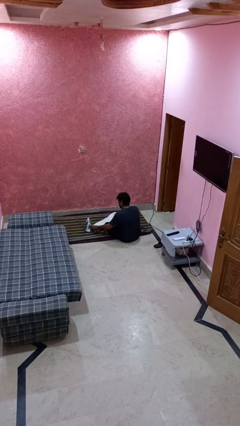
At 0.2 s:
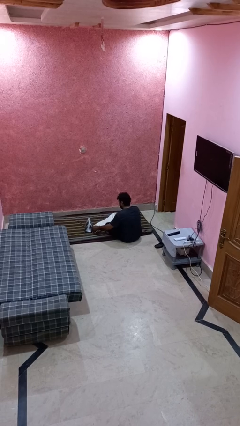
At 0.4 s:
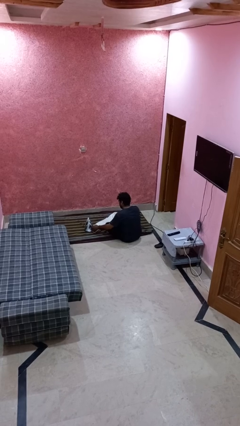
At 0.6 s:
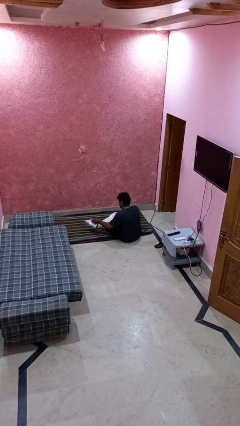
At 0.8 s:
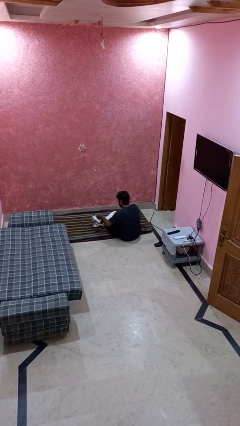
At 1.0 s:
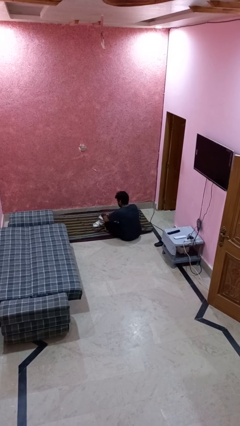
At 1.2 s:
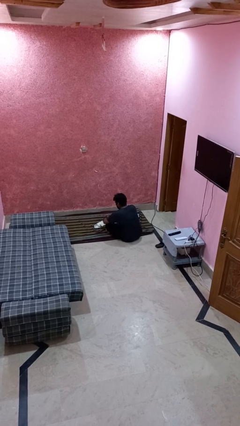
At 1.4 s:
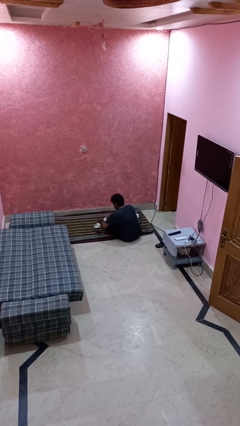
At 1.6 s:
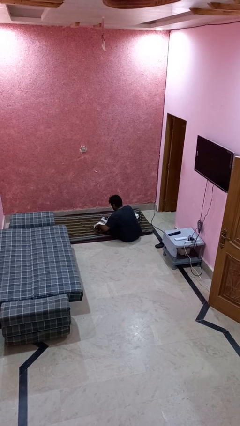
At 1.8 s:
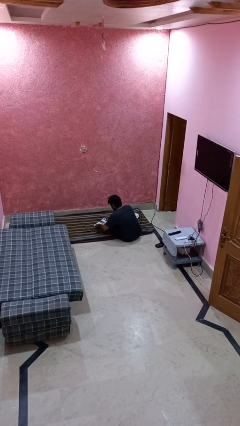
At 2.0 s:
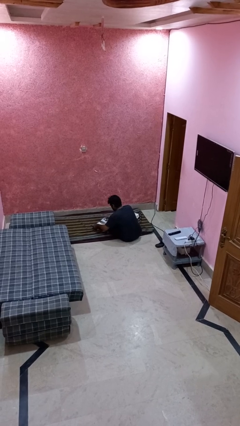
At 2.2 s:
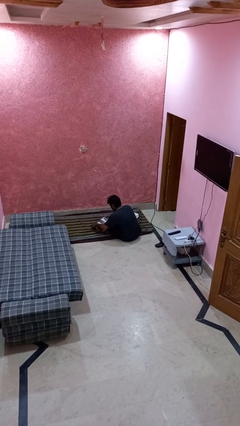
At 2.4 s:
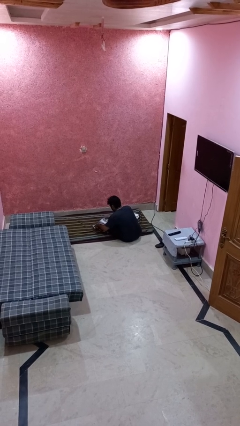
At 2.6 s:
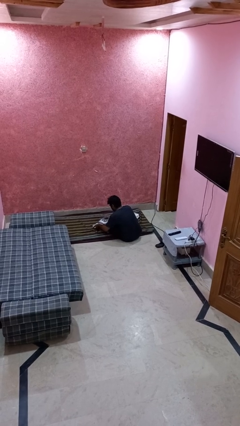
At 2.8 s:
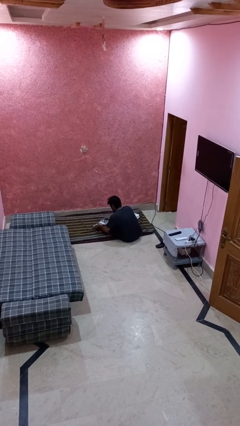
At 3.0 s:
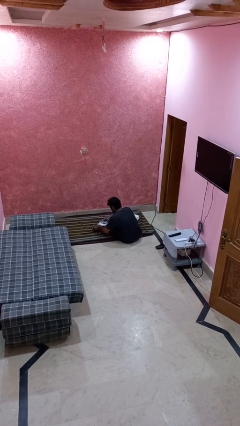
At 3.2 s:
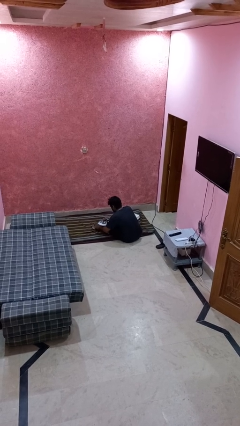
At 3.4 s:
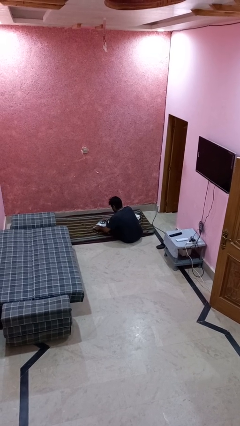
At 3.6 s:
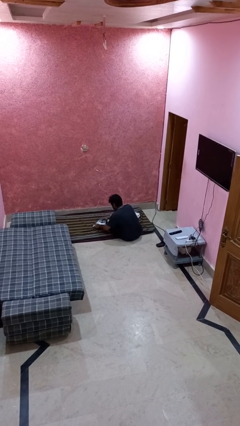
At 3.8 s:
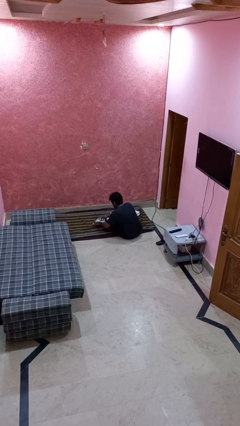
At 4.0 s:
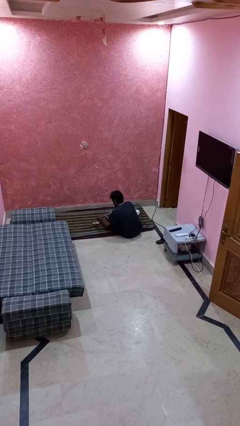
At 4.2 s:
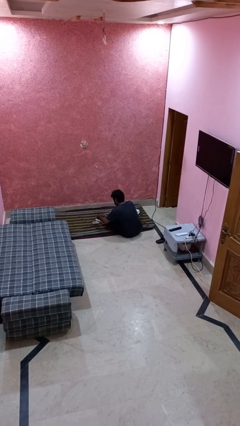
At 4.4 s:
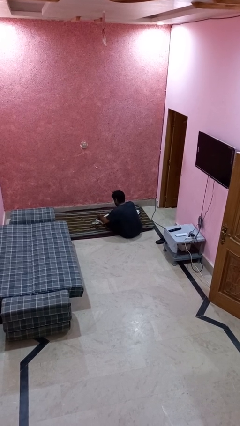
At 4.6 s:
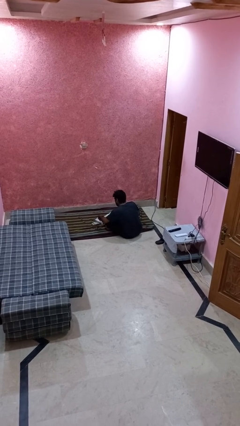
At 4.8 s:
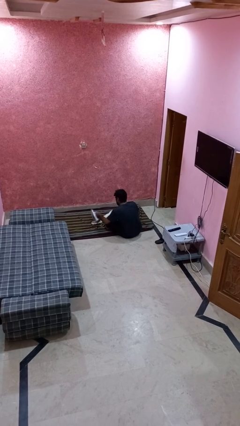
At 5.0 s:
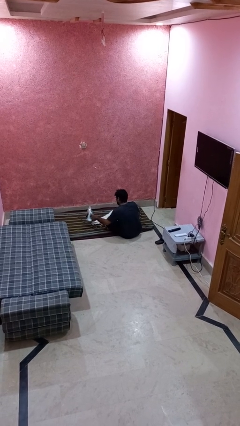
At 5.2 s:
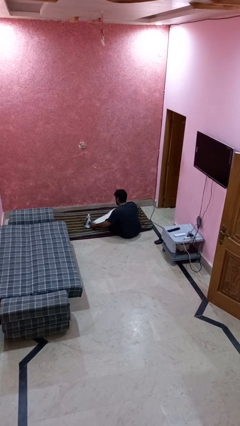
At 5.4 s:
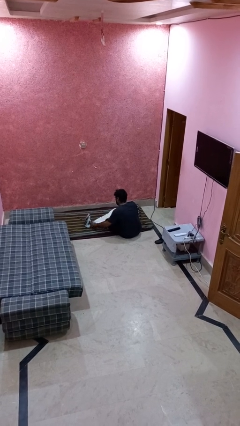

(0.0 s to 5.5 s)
person irons clothes

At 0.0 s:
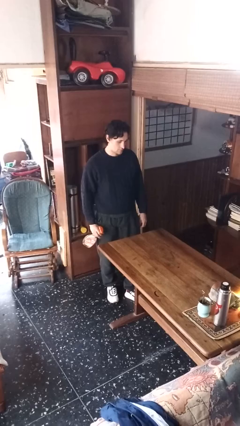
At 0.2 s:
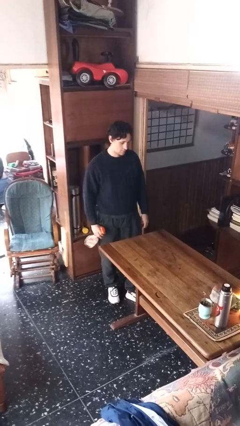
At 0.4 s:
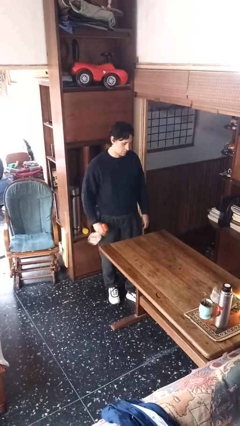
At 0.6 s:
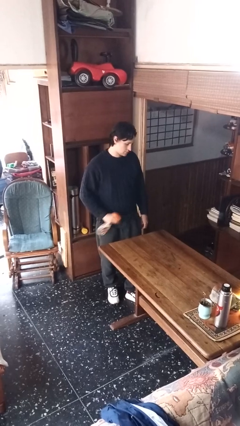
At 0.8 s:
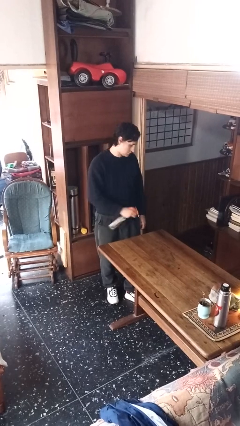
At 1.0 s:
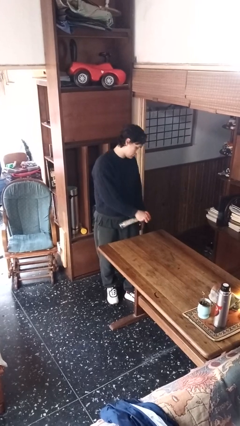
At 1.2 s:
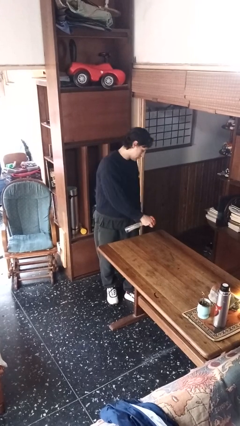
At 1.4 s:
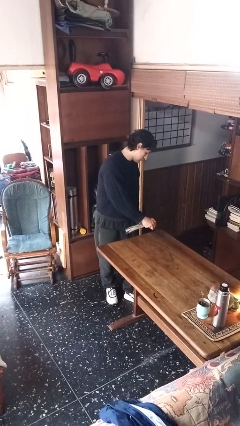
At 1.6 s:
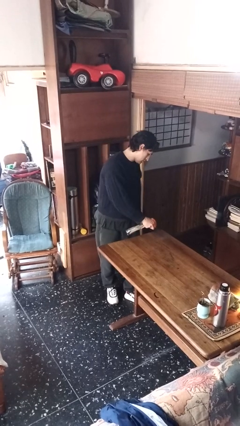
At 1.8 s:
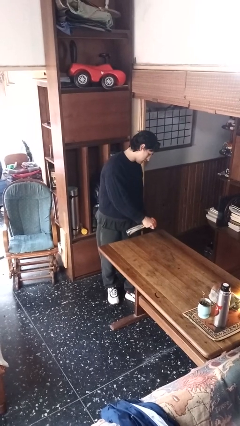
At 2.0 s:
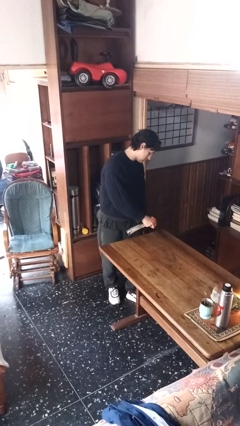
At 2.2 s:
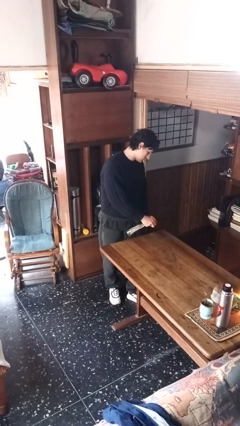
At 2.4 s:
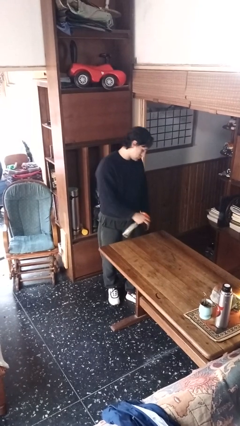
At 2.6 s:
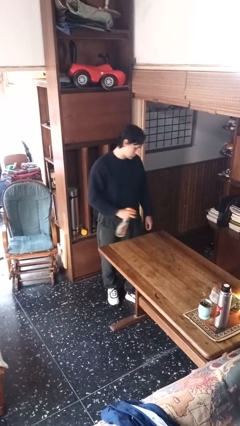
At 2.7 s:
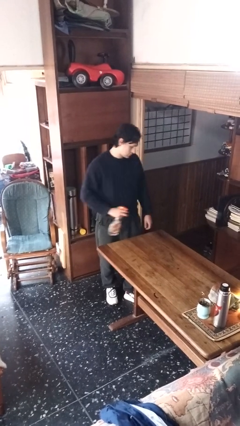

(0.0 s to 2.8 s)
person sprays from bottle

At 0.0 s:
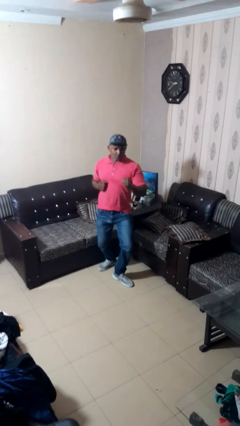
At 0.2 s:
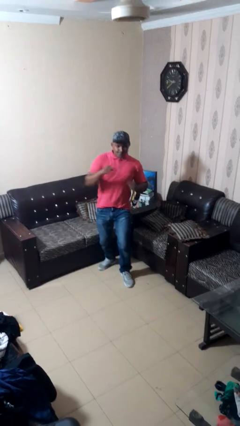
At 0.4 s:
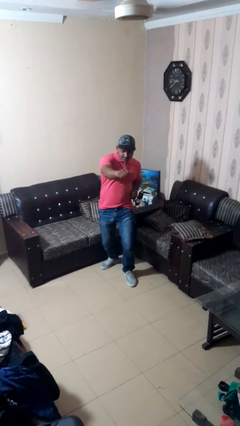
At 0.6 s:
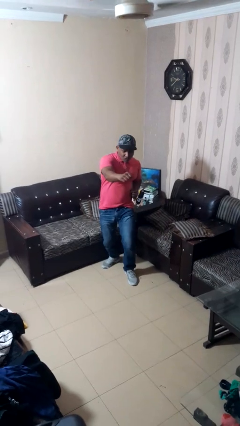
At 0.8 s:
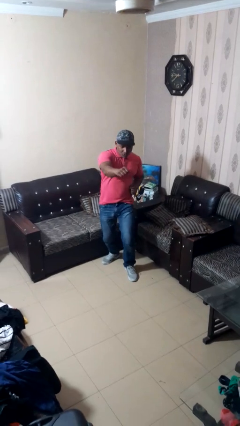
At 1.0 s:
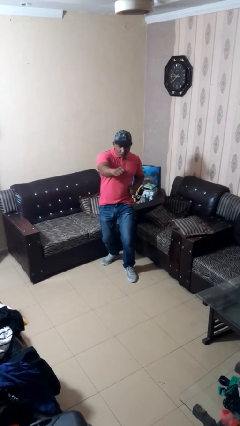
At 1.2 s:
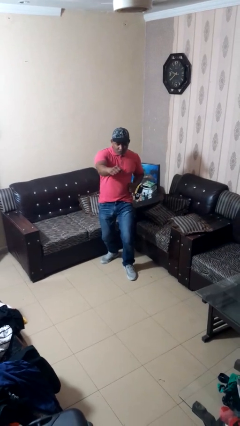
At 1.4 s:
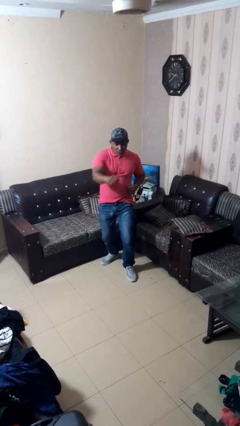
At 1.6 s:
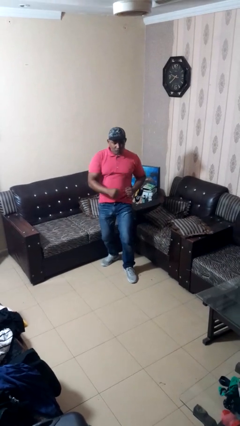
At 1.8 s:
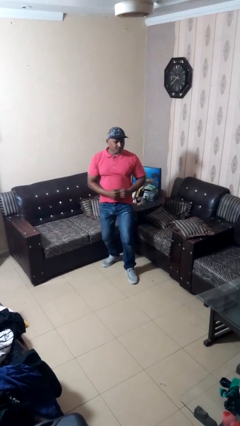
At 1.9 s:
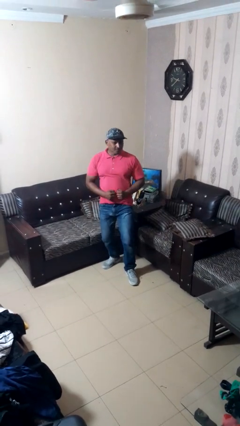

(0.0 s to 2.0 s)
person karate chop

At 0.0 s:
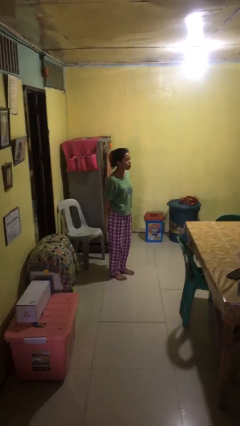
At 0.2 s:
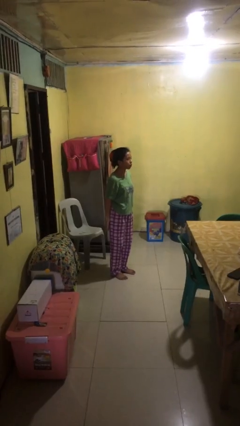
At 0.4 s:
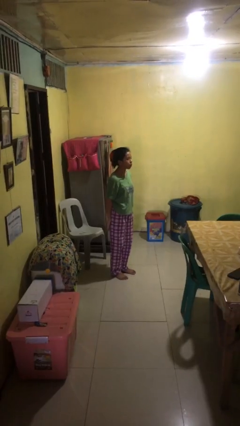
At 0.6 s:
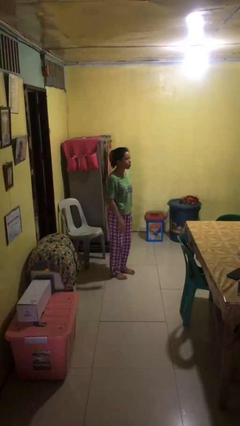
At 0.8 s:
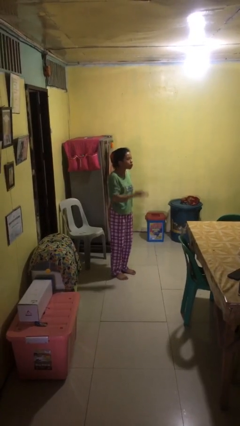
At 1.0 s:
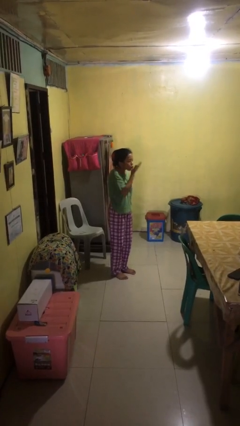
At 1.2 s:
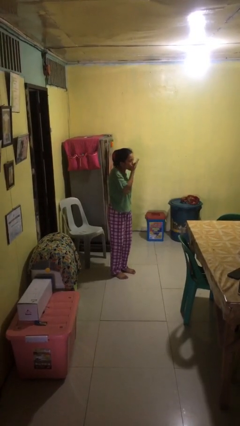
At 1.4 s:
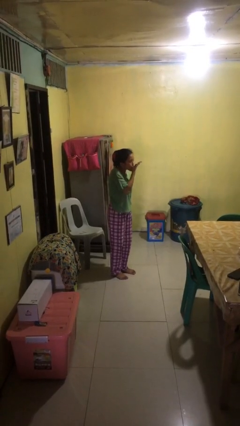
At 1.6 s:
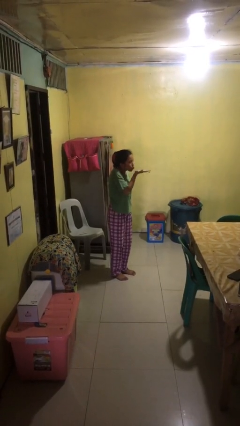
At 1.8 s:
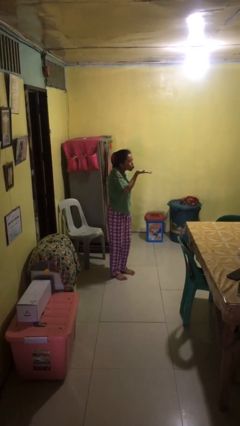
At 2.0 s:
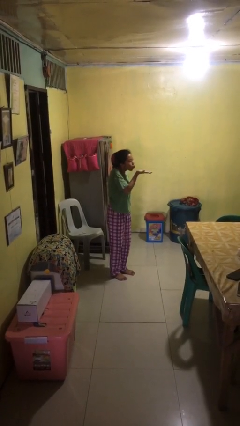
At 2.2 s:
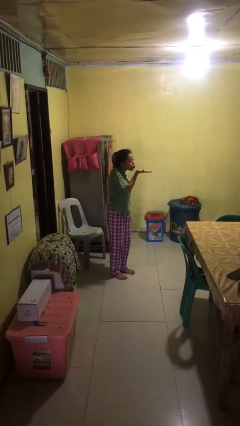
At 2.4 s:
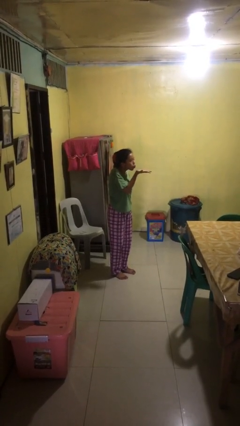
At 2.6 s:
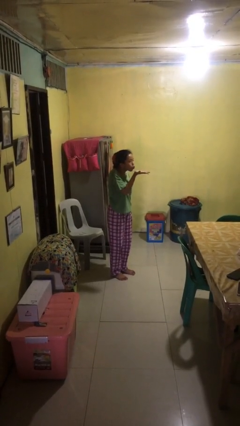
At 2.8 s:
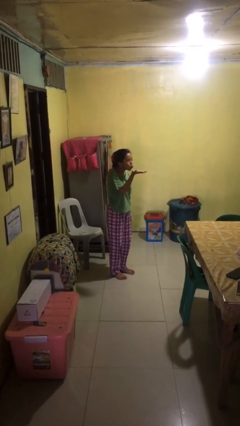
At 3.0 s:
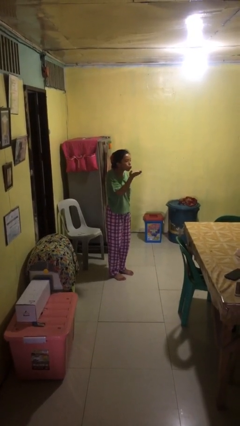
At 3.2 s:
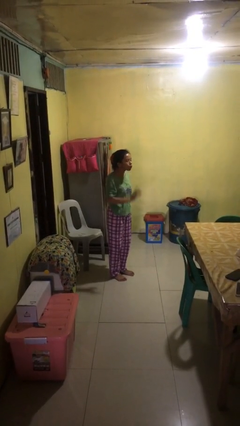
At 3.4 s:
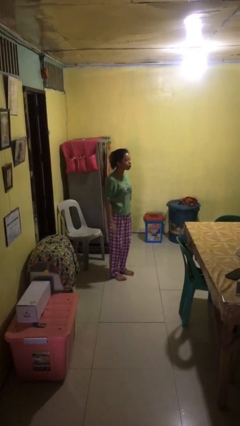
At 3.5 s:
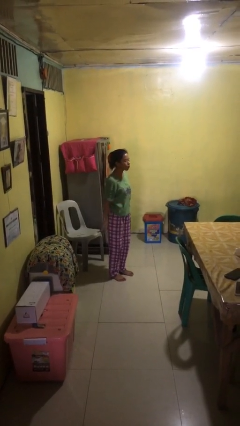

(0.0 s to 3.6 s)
person gestures blow kiss

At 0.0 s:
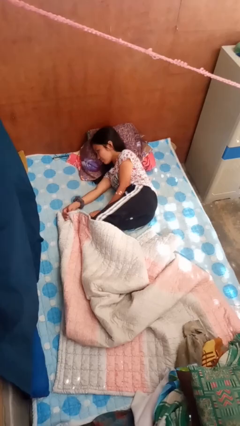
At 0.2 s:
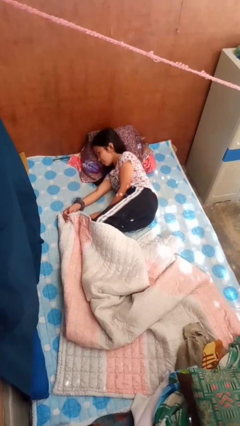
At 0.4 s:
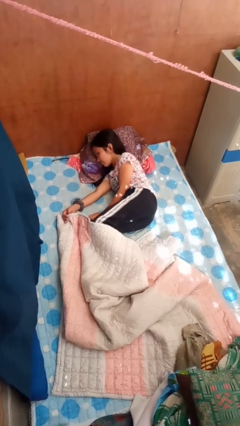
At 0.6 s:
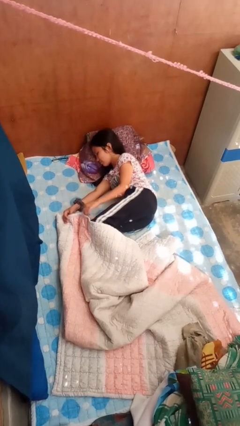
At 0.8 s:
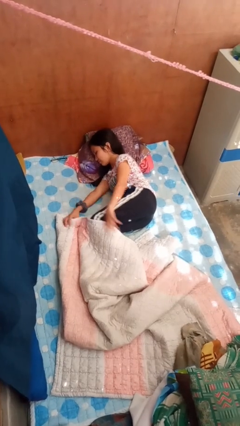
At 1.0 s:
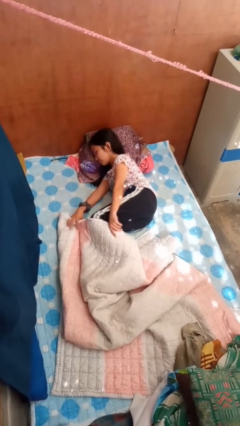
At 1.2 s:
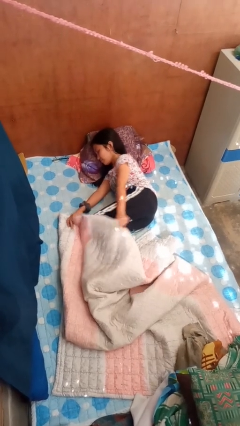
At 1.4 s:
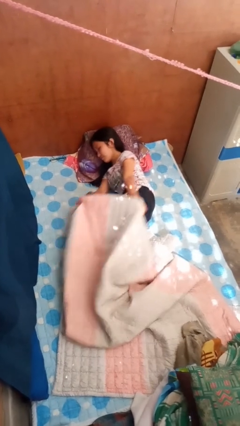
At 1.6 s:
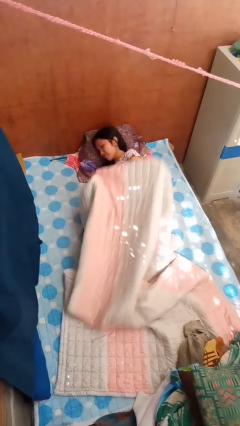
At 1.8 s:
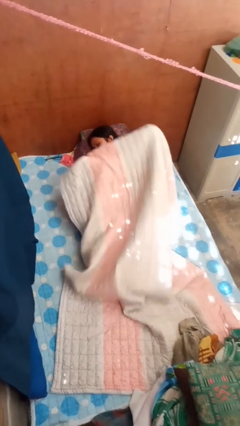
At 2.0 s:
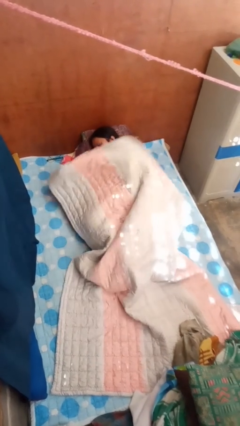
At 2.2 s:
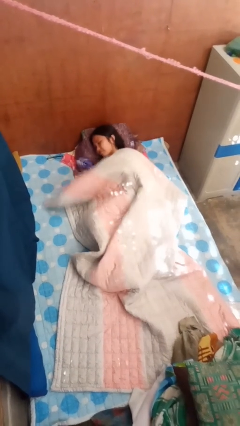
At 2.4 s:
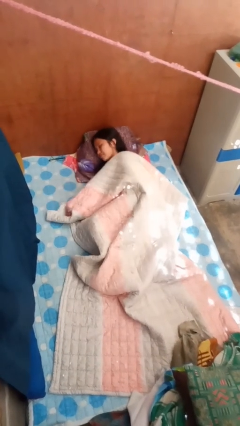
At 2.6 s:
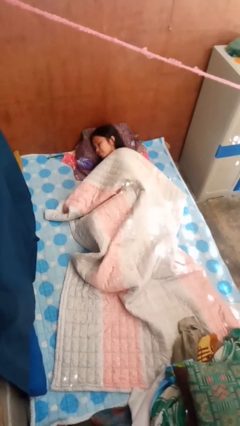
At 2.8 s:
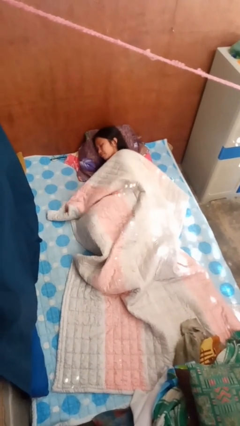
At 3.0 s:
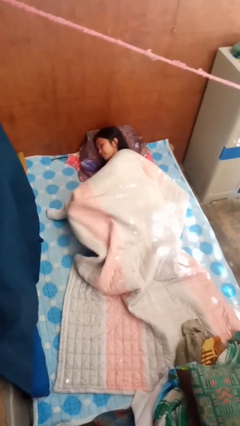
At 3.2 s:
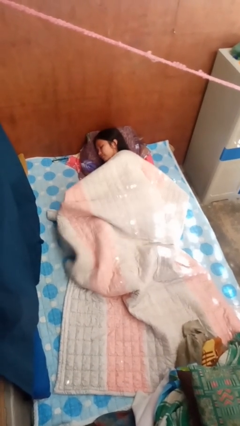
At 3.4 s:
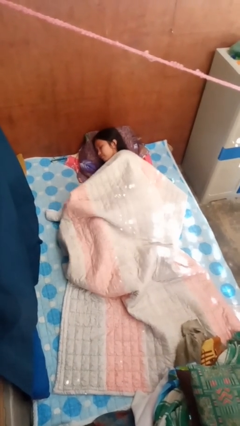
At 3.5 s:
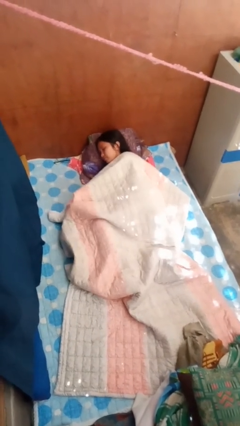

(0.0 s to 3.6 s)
person covers with bedsheets
